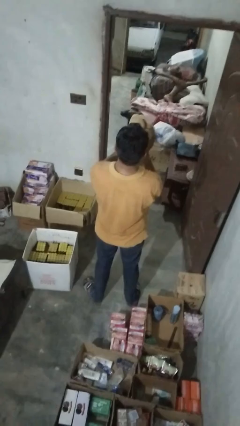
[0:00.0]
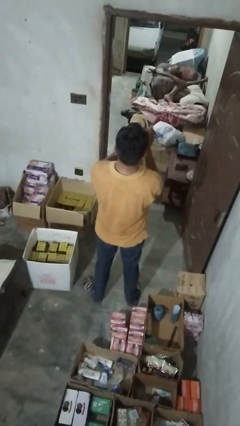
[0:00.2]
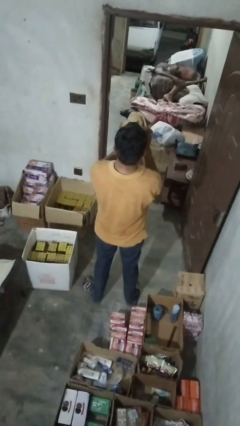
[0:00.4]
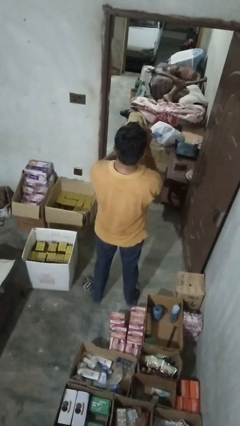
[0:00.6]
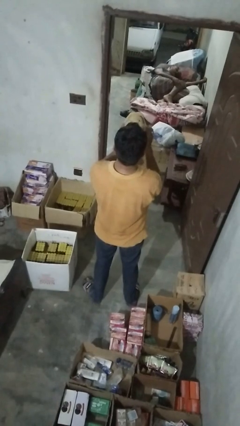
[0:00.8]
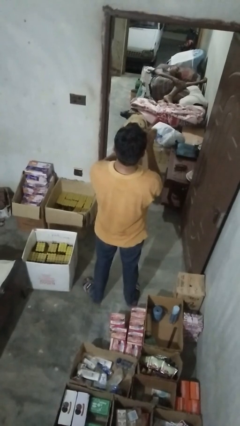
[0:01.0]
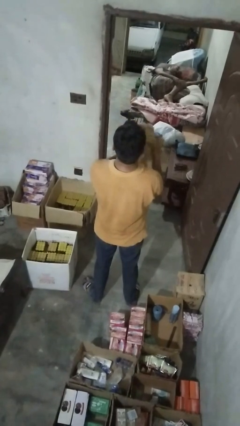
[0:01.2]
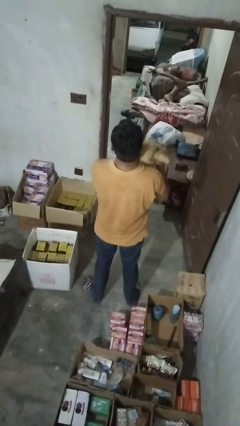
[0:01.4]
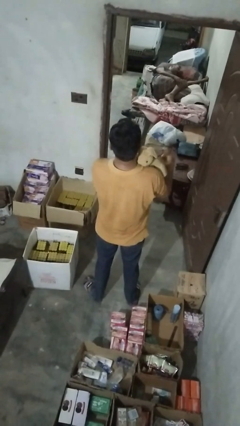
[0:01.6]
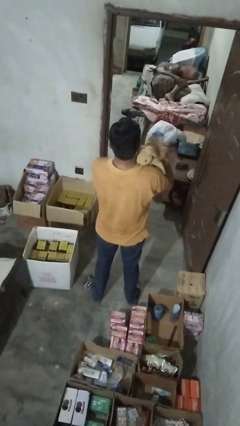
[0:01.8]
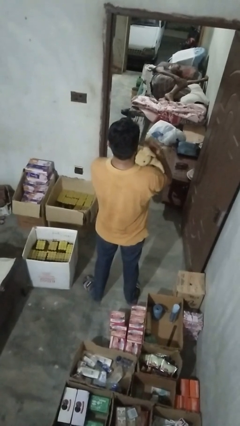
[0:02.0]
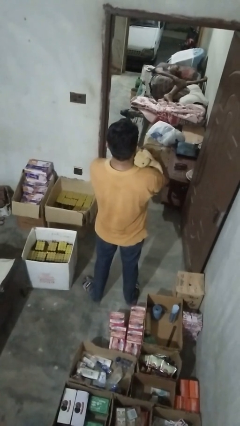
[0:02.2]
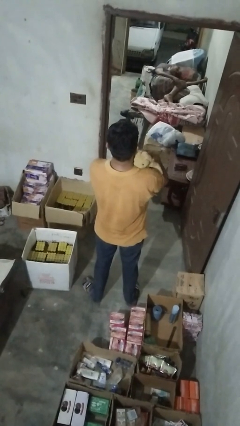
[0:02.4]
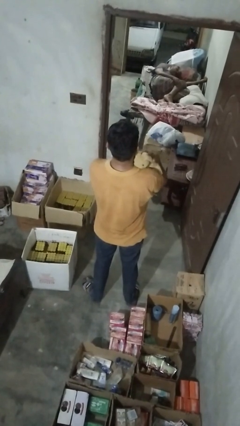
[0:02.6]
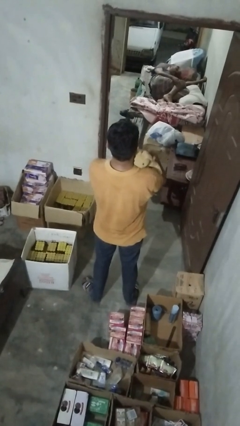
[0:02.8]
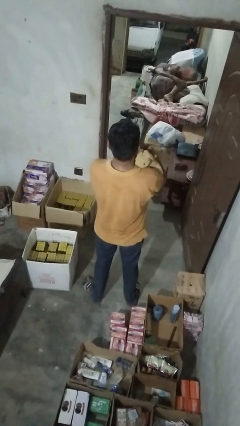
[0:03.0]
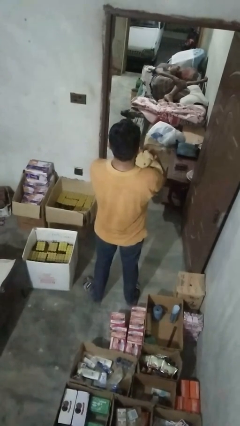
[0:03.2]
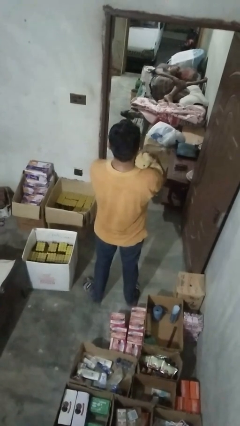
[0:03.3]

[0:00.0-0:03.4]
person hugs stuffed animal

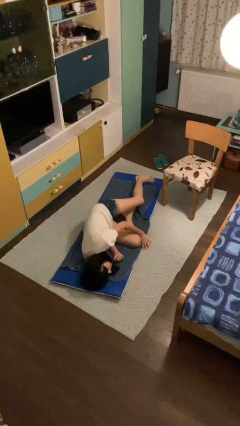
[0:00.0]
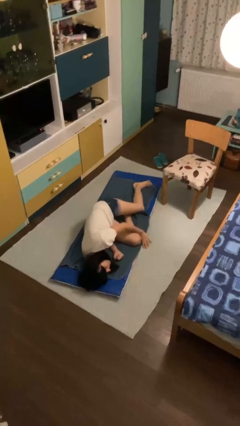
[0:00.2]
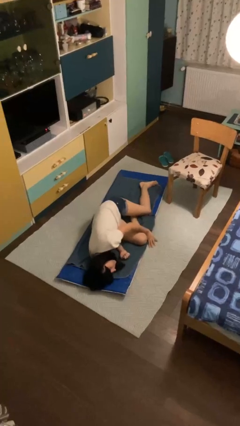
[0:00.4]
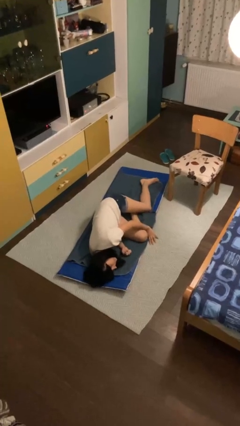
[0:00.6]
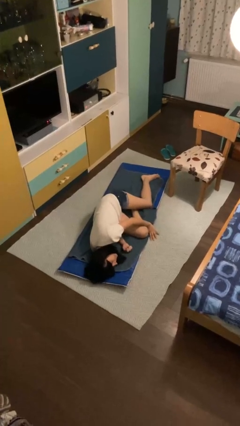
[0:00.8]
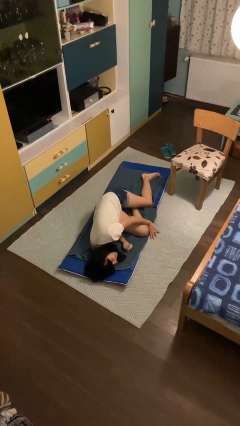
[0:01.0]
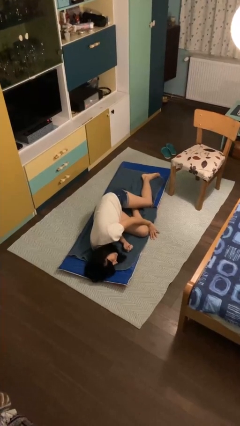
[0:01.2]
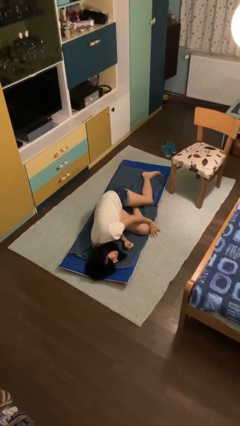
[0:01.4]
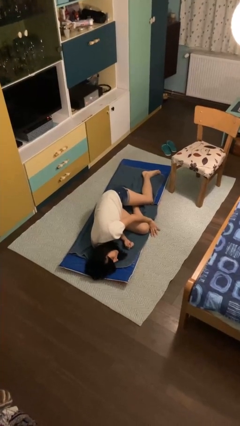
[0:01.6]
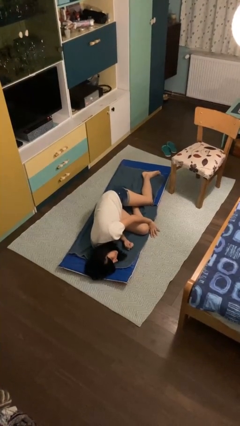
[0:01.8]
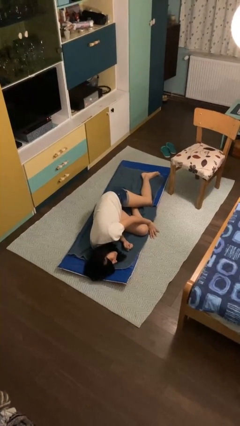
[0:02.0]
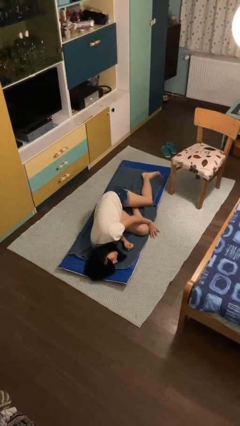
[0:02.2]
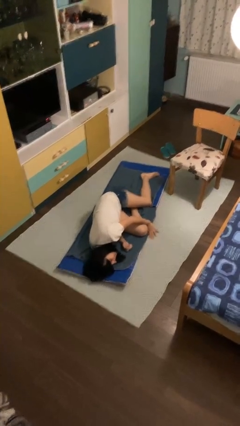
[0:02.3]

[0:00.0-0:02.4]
person lies down on floor

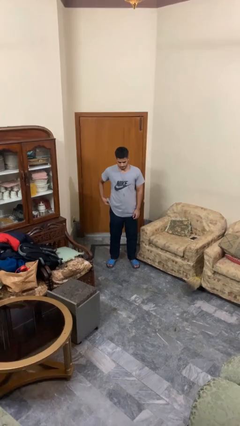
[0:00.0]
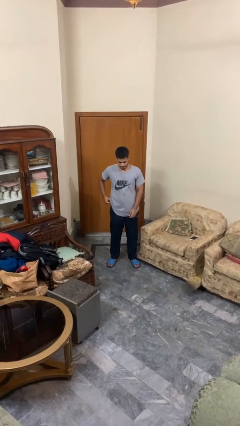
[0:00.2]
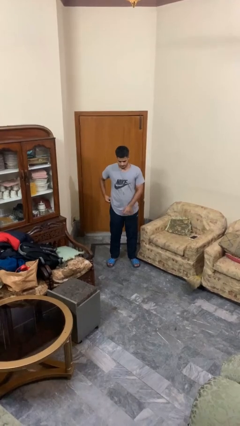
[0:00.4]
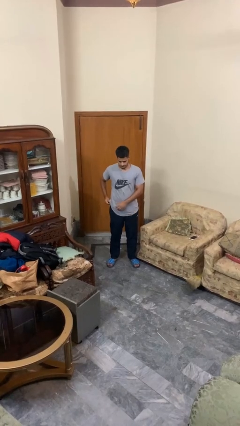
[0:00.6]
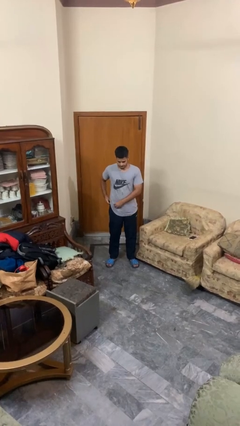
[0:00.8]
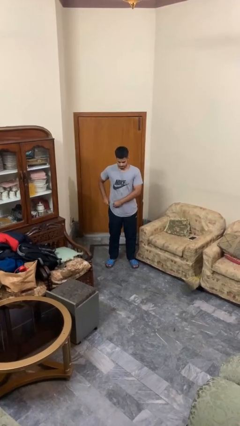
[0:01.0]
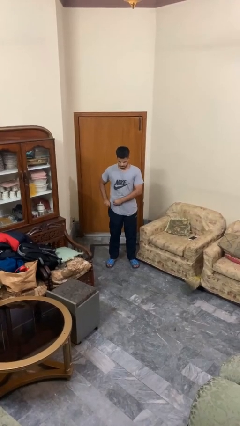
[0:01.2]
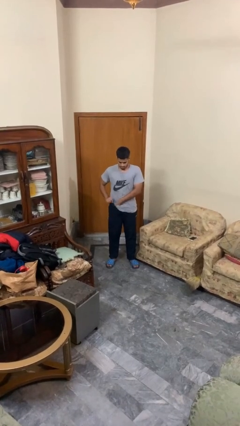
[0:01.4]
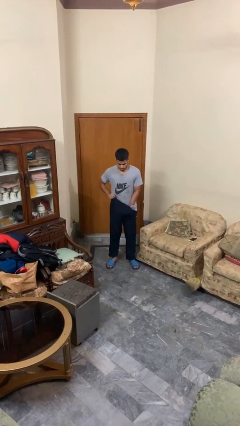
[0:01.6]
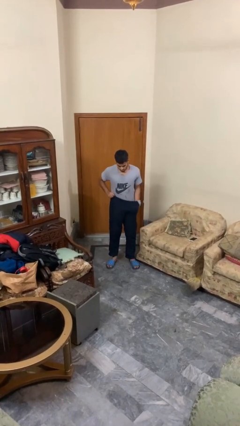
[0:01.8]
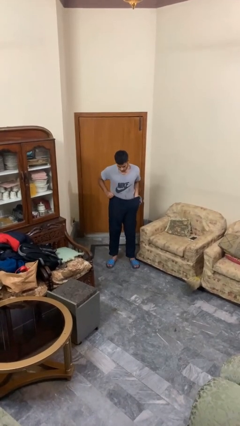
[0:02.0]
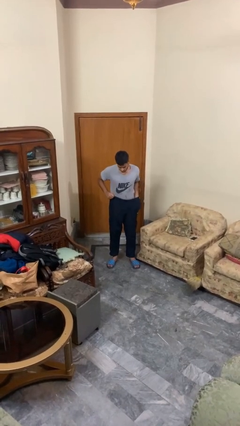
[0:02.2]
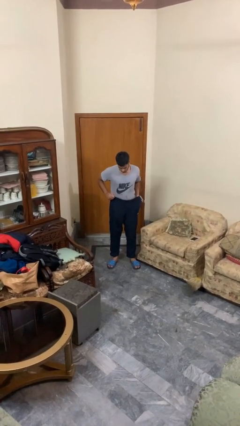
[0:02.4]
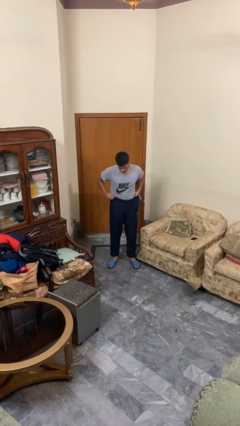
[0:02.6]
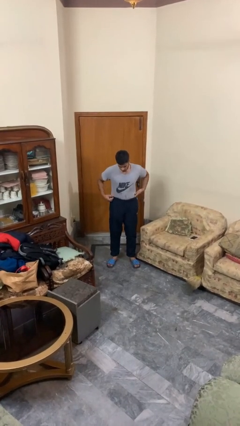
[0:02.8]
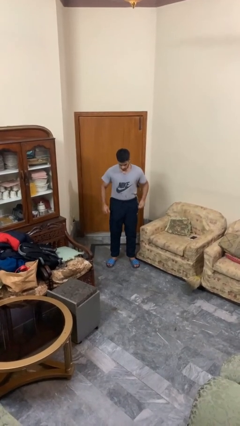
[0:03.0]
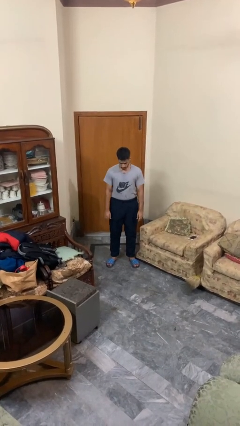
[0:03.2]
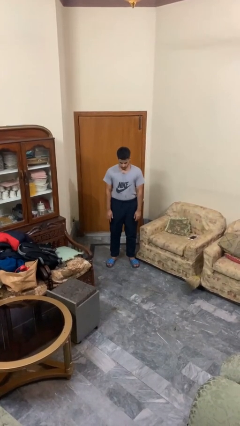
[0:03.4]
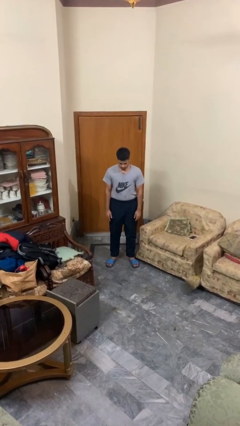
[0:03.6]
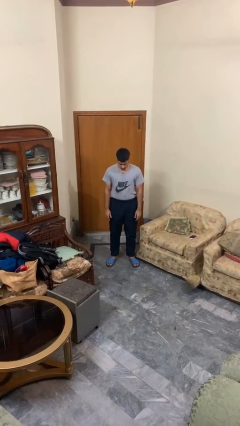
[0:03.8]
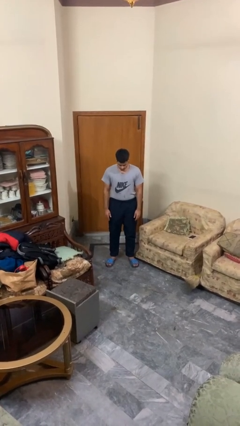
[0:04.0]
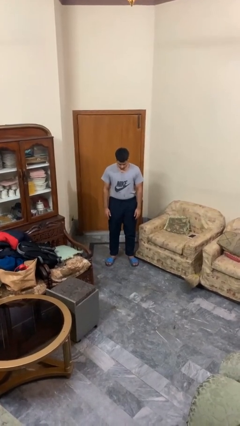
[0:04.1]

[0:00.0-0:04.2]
person tucks in shirt

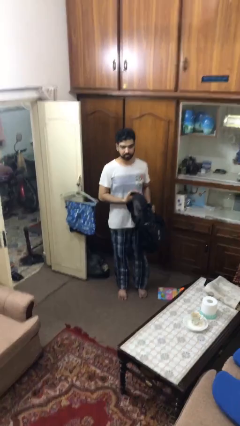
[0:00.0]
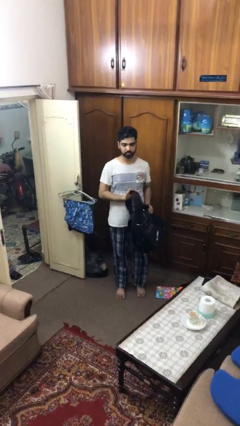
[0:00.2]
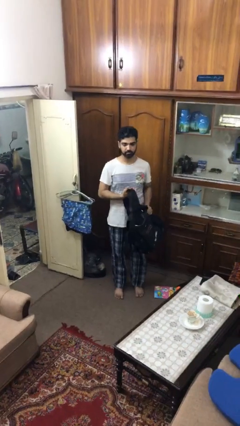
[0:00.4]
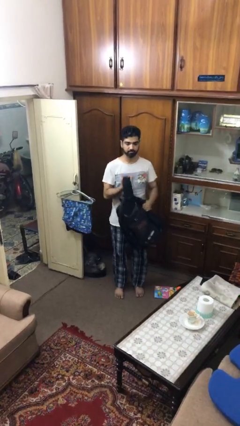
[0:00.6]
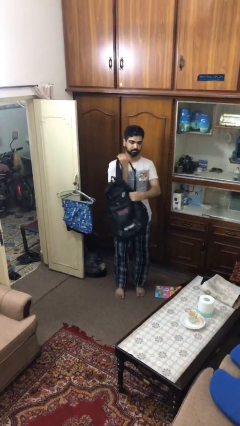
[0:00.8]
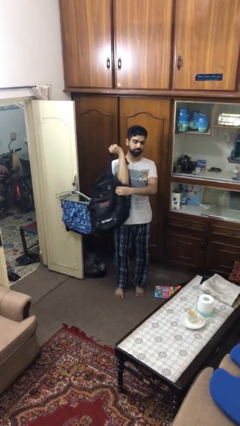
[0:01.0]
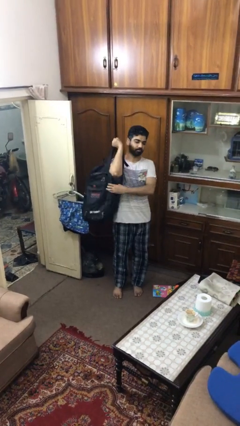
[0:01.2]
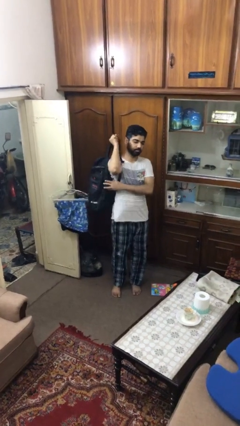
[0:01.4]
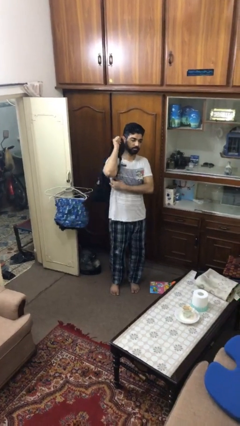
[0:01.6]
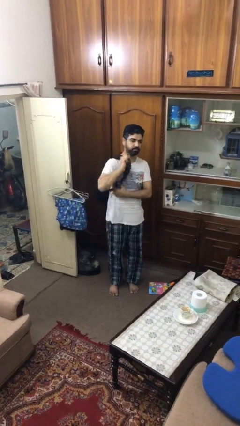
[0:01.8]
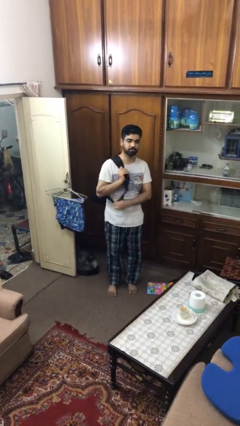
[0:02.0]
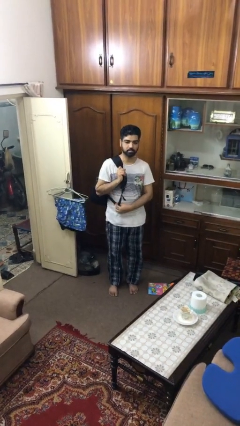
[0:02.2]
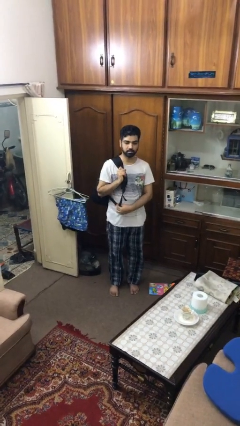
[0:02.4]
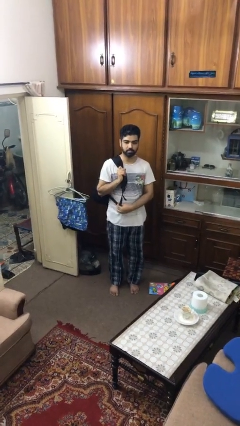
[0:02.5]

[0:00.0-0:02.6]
person puts on backpack

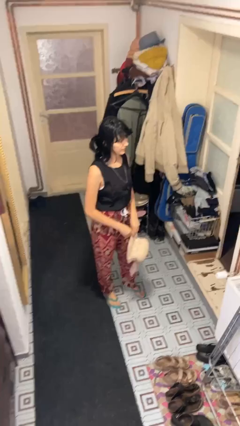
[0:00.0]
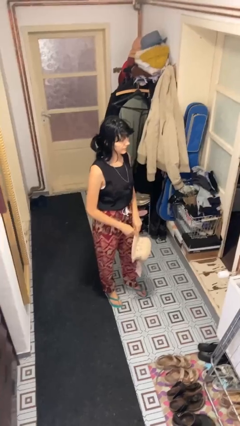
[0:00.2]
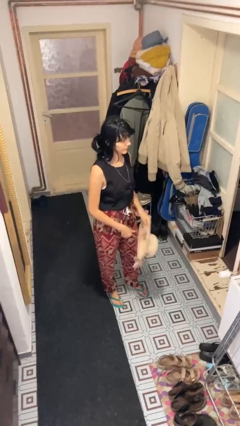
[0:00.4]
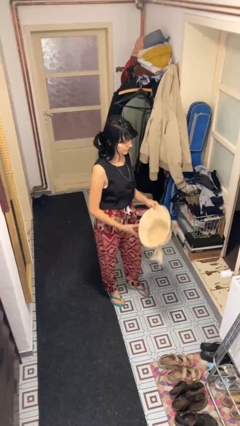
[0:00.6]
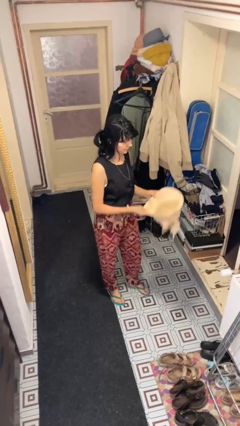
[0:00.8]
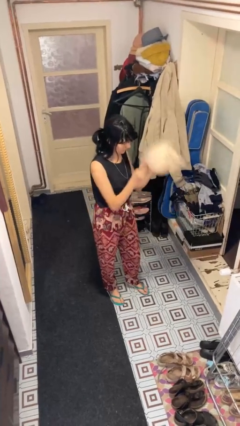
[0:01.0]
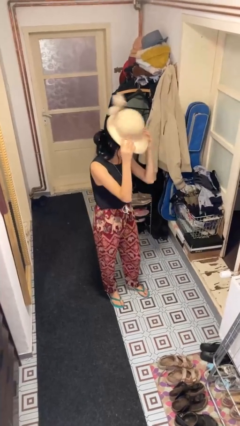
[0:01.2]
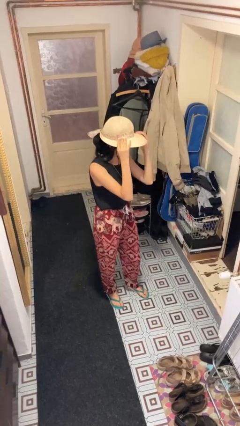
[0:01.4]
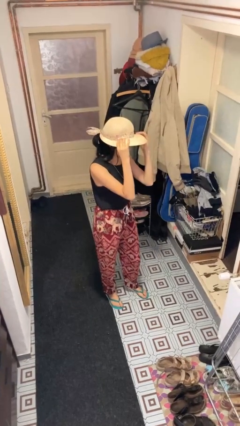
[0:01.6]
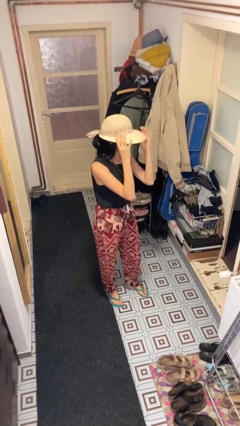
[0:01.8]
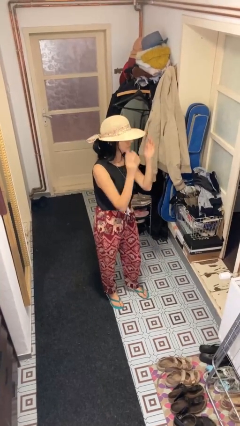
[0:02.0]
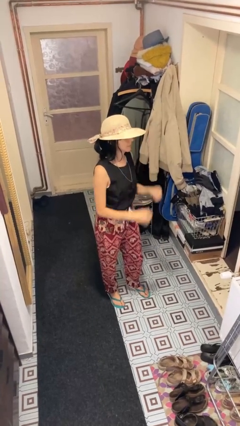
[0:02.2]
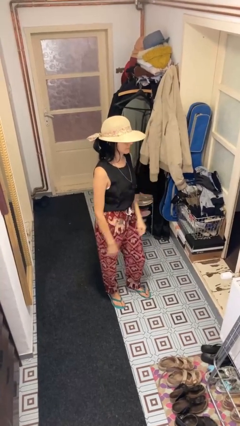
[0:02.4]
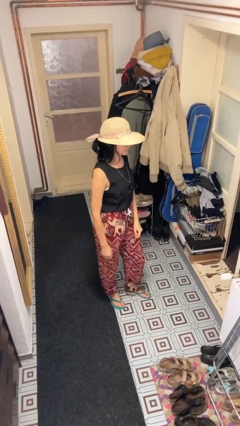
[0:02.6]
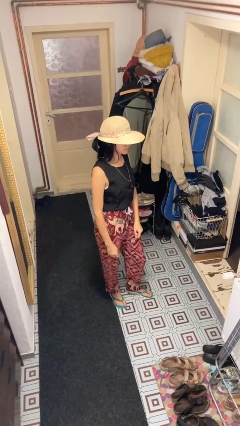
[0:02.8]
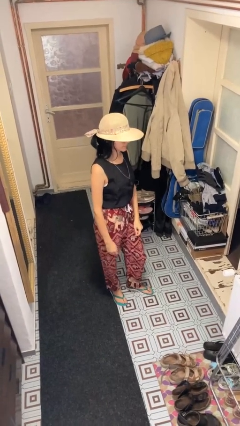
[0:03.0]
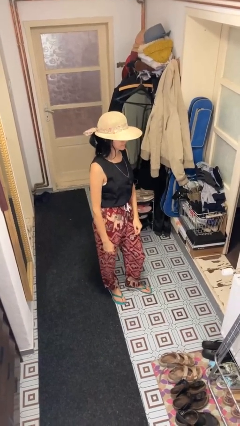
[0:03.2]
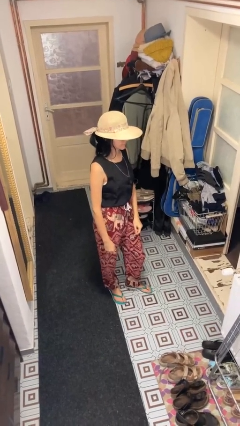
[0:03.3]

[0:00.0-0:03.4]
person puts on hat

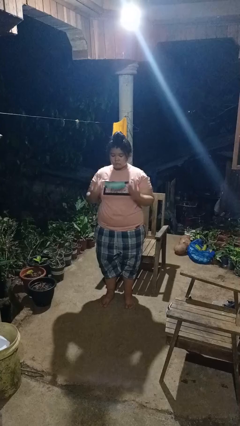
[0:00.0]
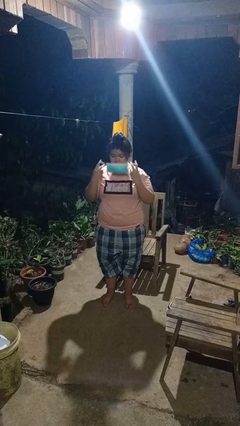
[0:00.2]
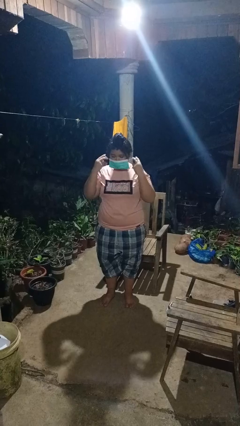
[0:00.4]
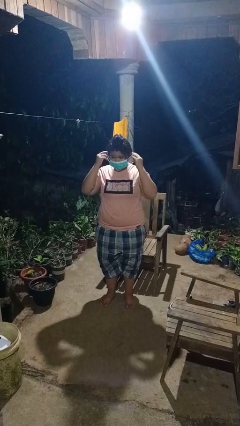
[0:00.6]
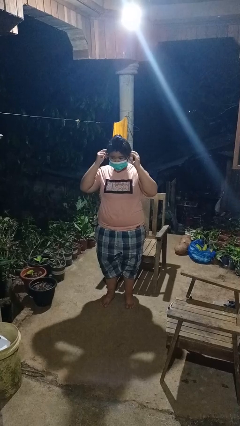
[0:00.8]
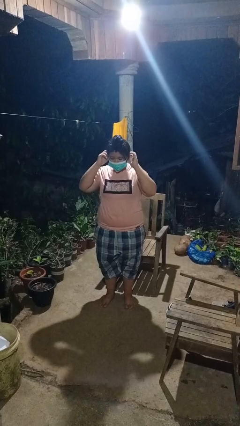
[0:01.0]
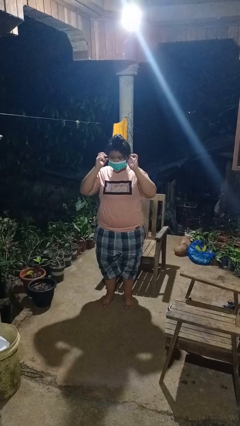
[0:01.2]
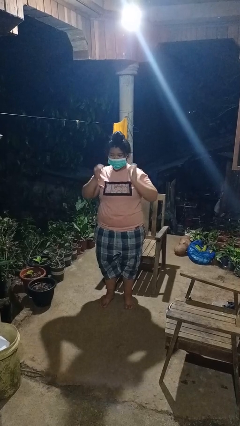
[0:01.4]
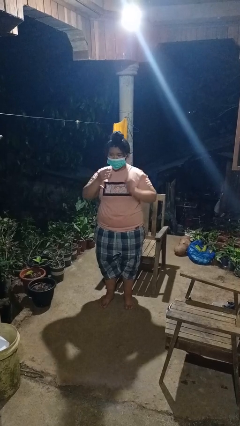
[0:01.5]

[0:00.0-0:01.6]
person puts on facemask
